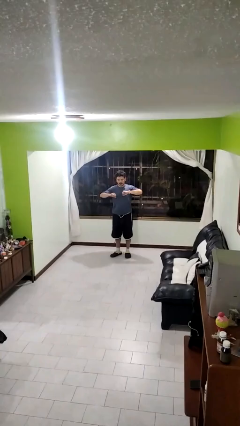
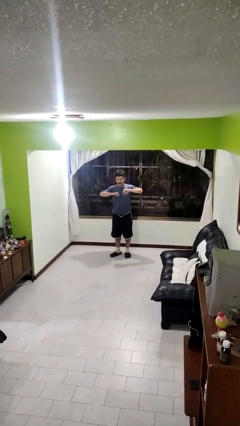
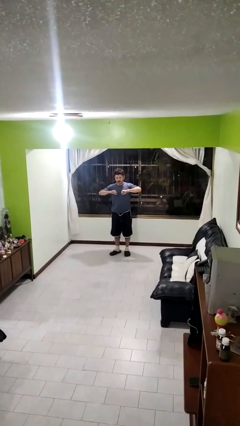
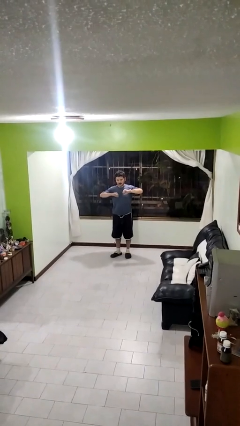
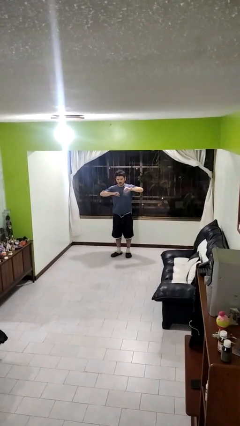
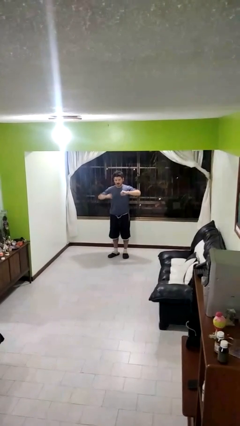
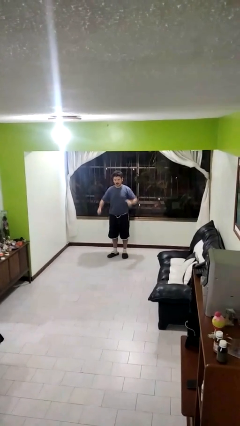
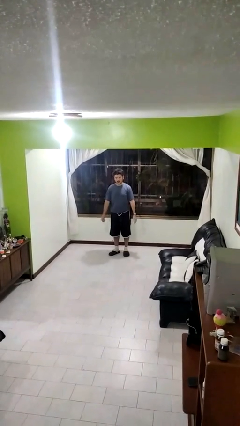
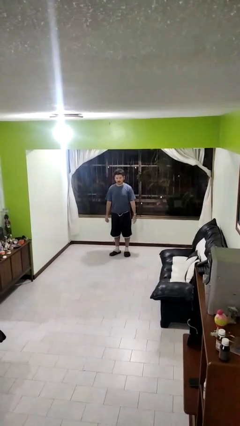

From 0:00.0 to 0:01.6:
person drums on chest

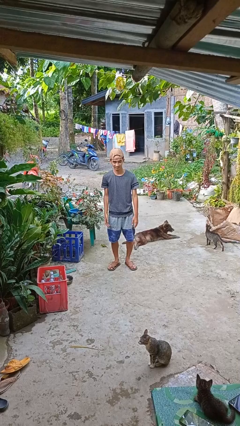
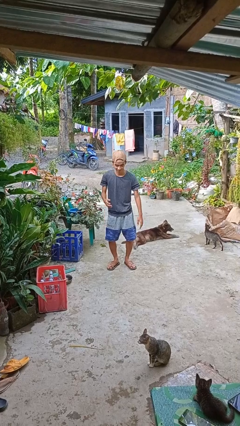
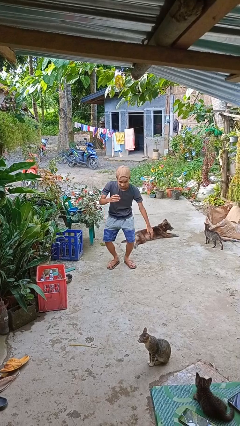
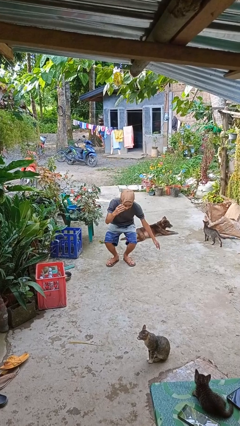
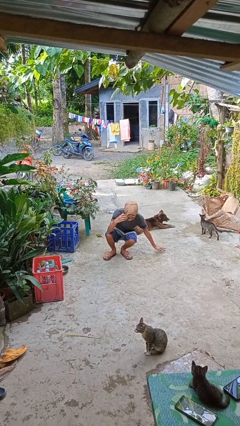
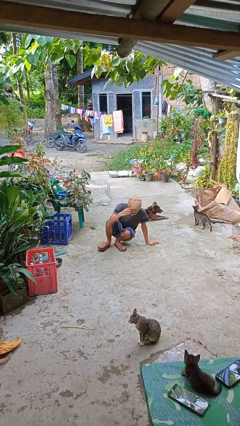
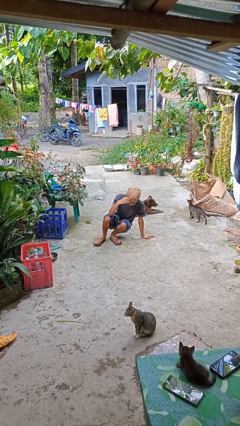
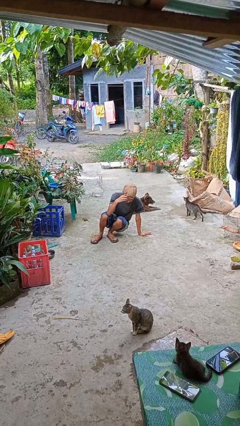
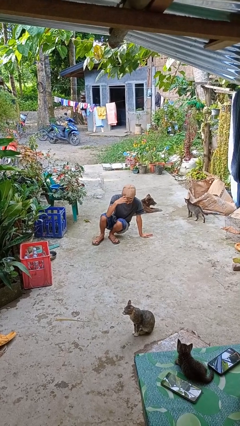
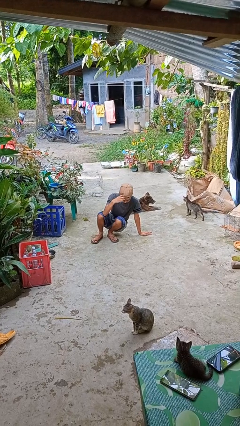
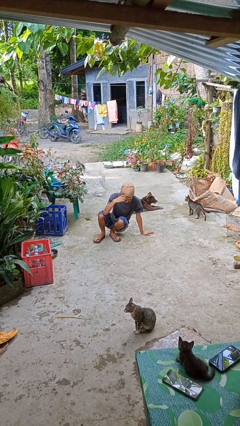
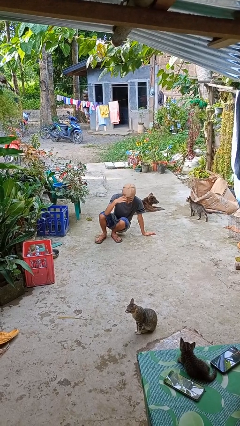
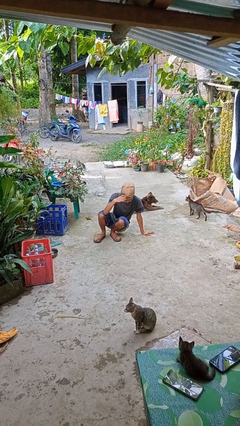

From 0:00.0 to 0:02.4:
person falls while standing

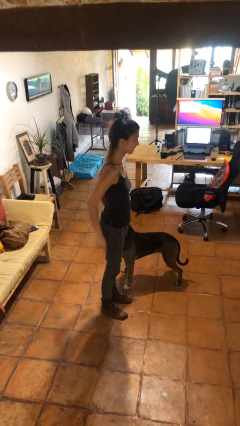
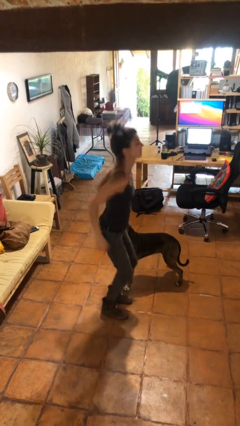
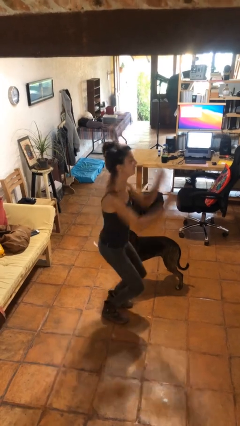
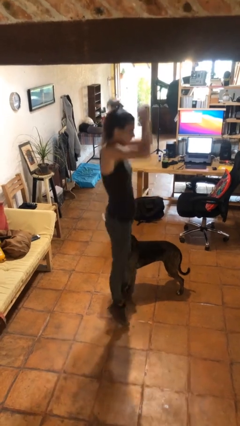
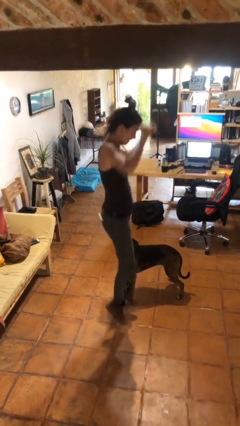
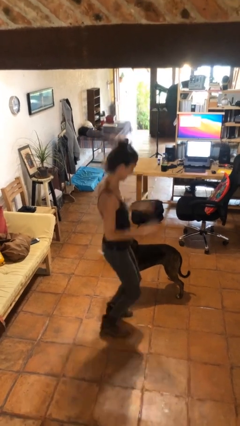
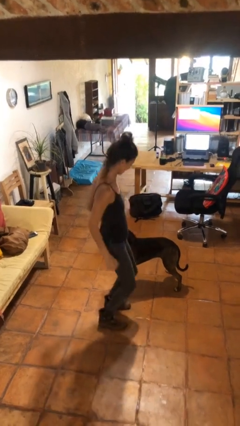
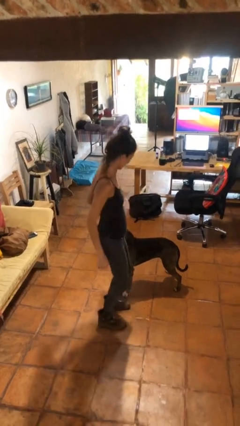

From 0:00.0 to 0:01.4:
person jumps

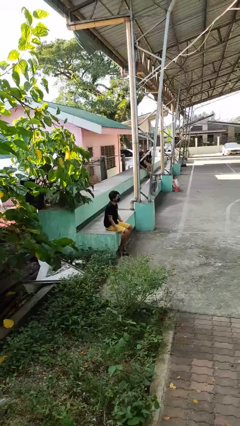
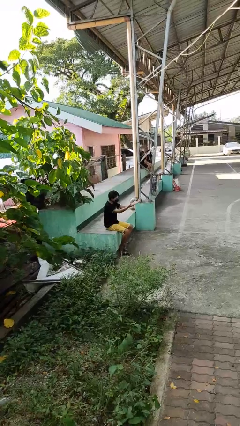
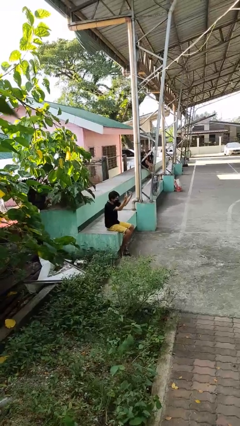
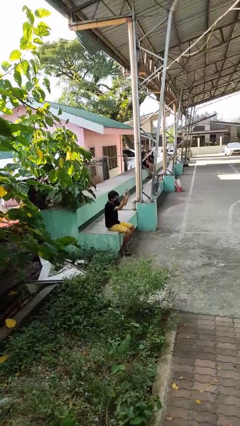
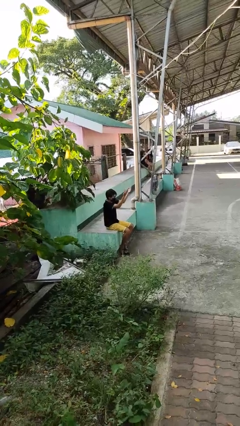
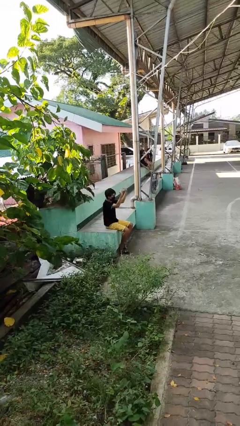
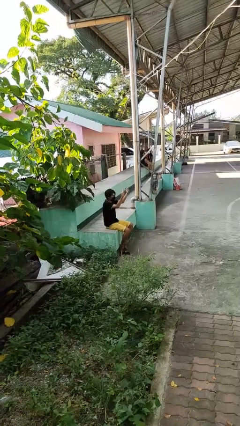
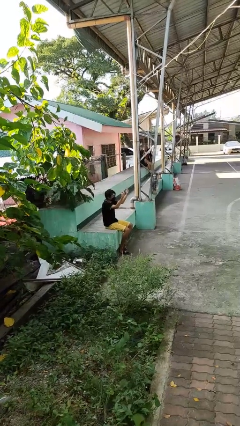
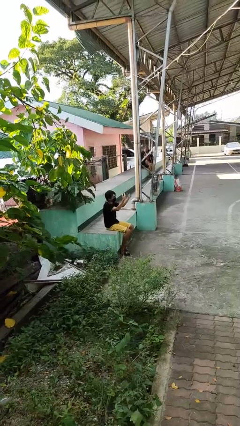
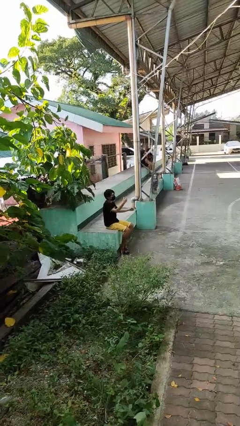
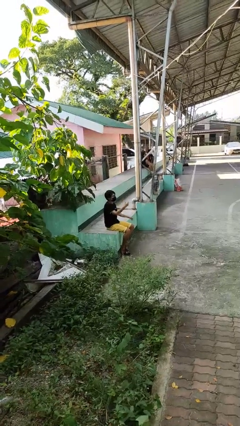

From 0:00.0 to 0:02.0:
person gestures come here

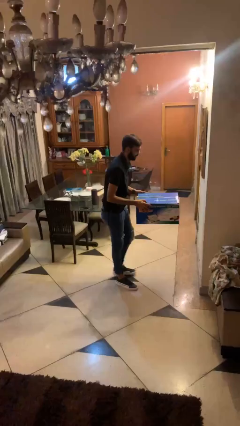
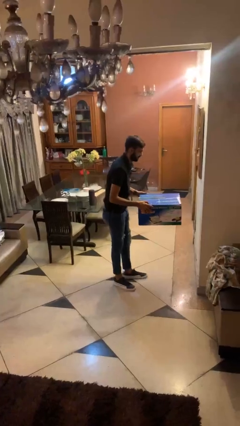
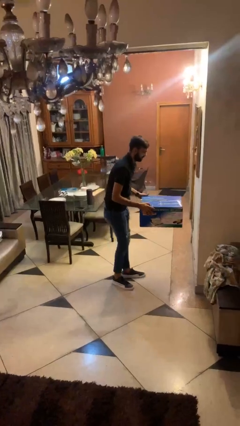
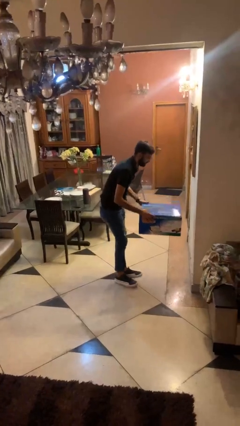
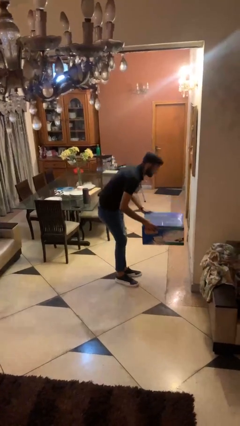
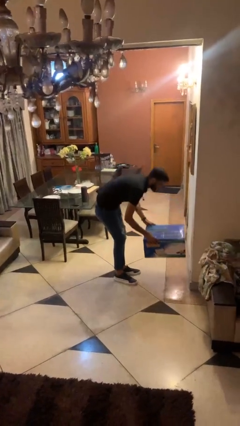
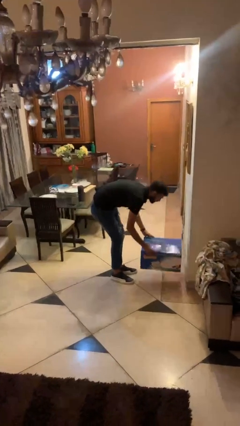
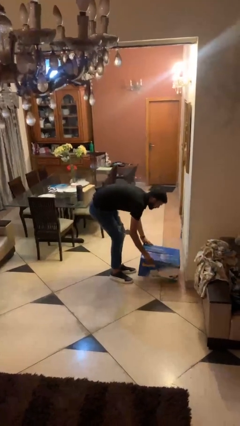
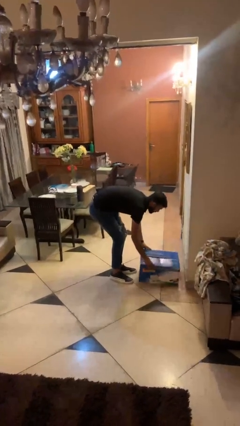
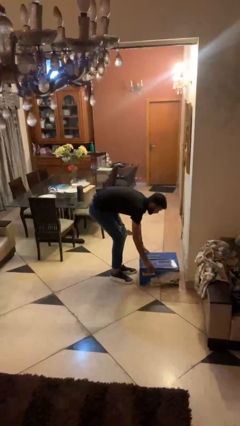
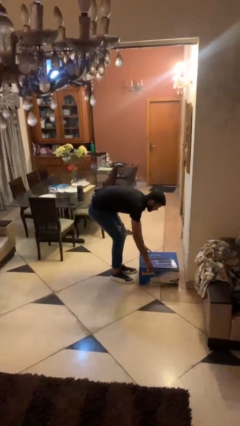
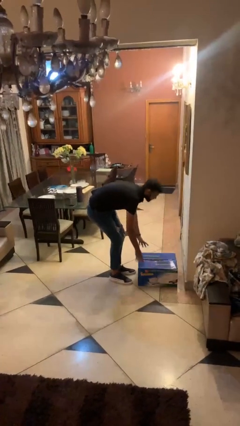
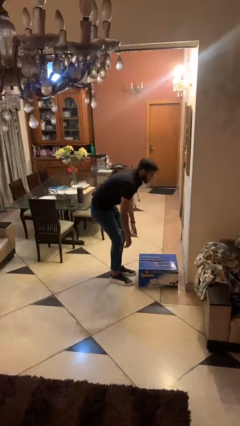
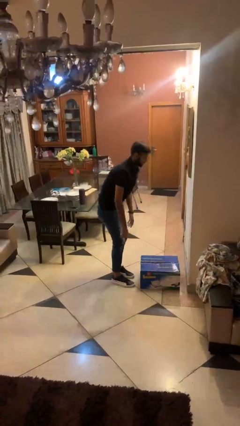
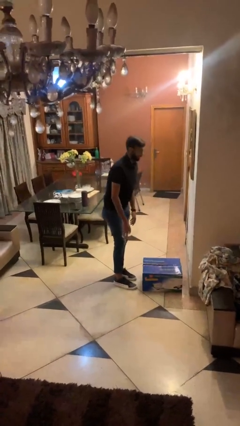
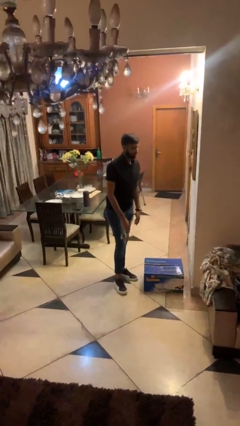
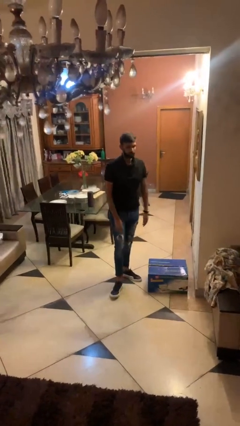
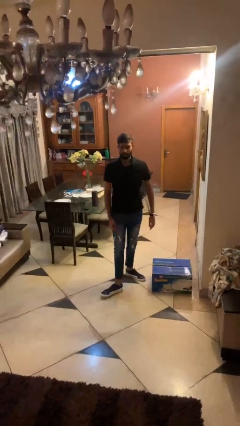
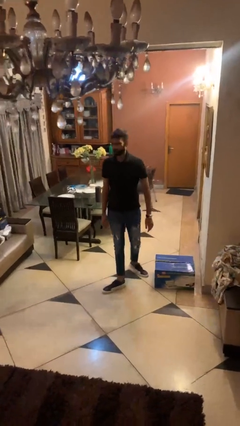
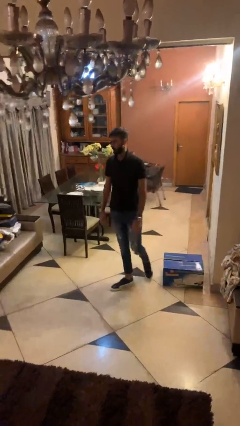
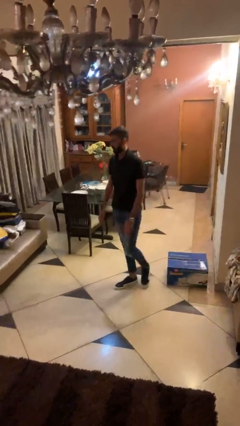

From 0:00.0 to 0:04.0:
person puts down object on floor

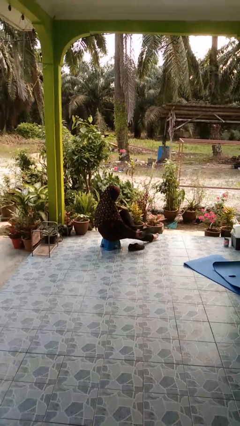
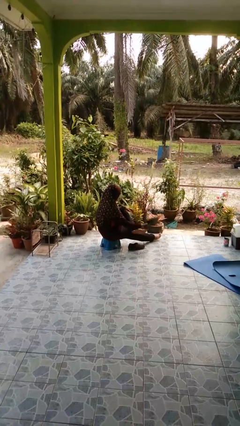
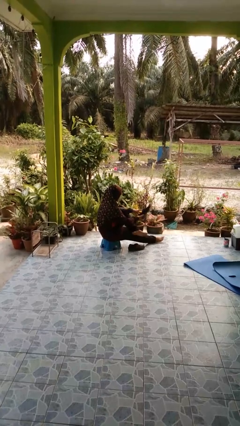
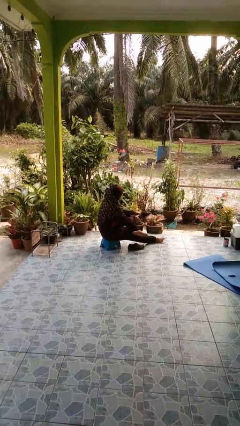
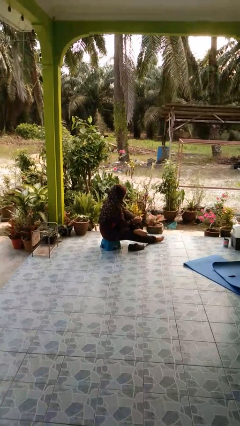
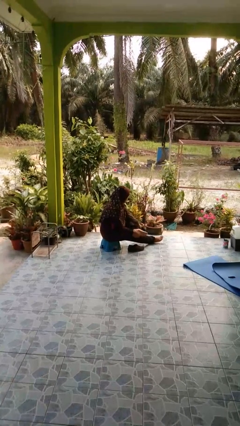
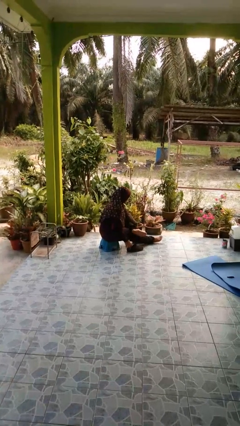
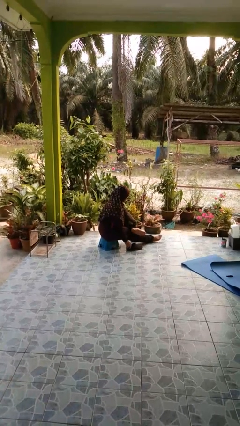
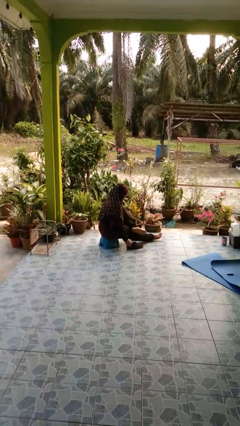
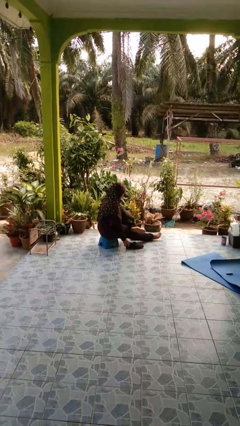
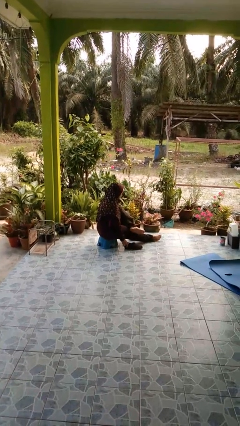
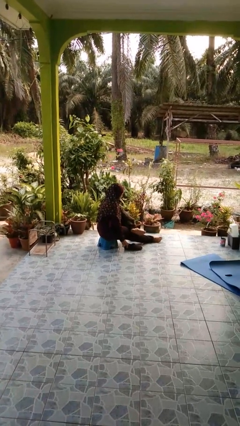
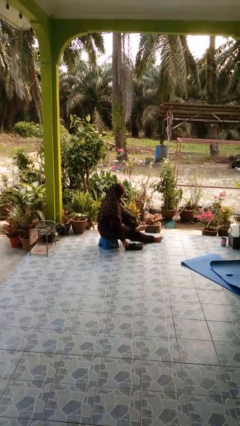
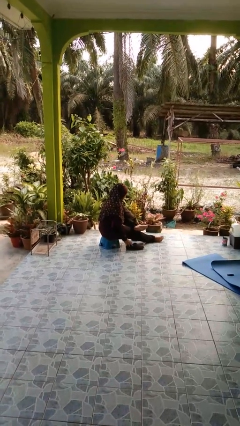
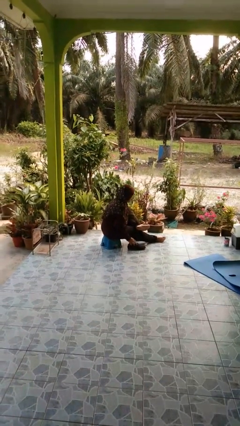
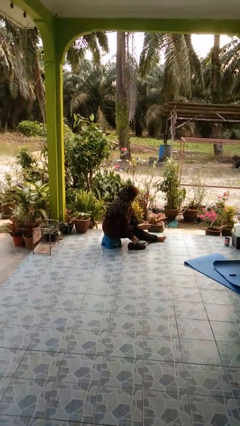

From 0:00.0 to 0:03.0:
person takes off shoes

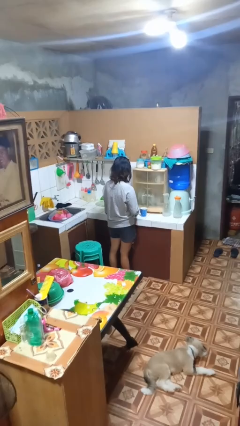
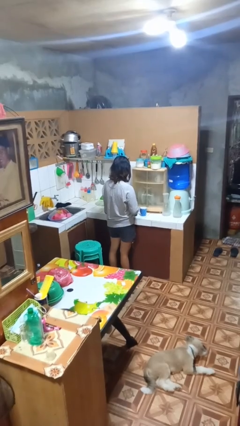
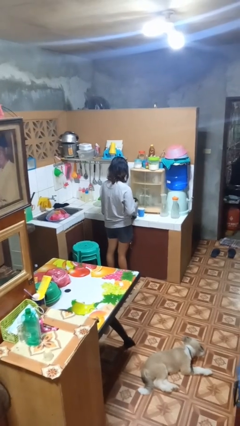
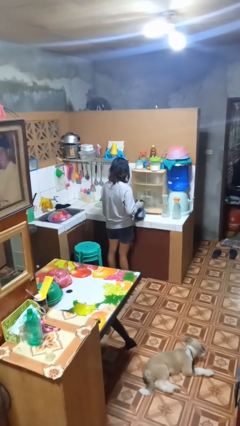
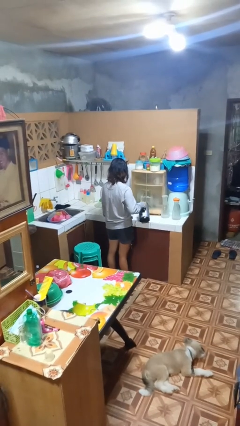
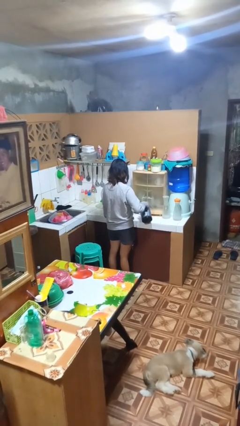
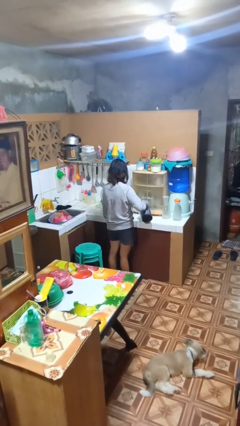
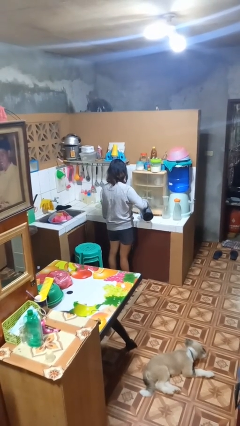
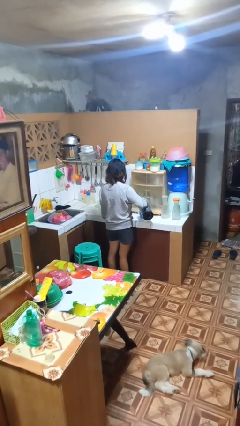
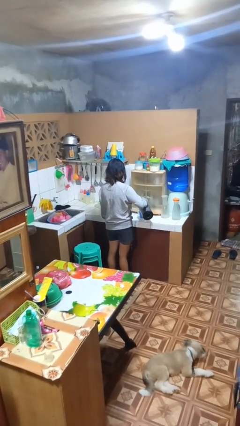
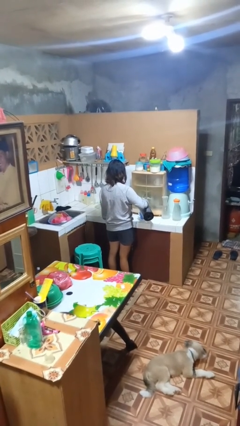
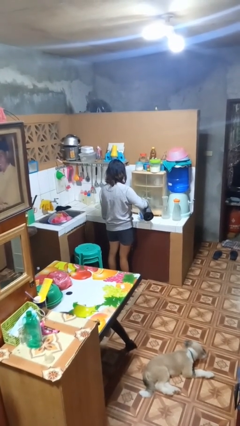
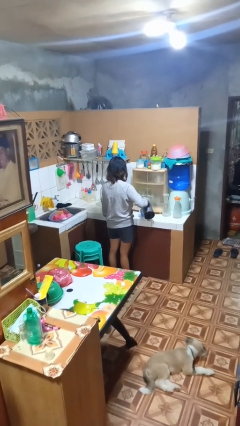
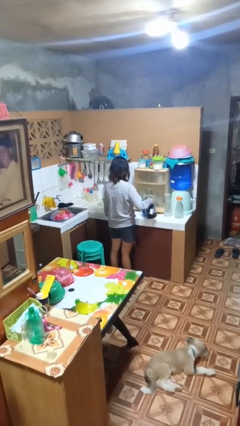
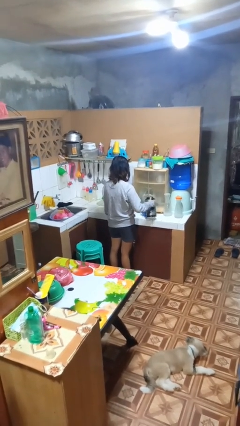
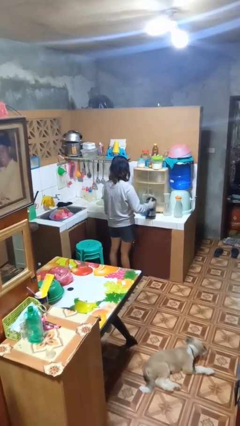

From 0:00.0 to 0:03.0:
person pours coffee into mug
